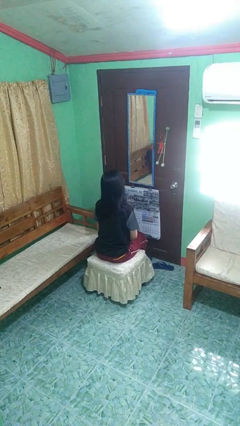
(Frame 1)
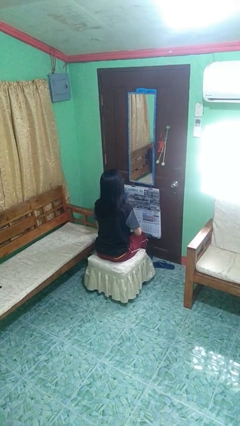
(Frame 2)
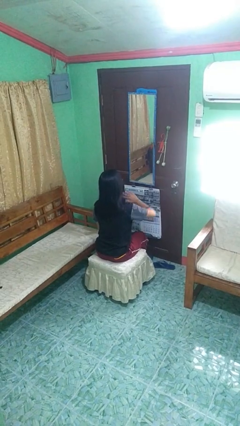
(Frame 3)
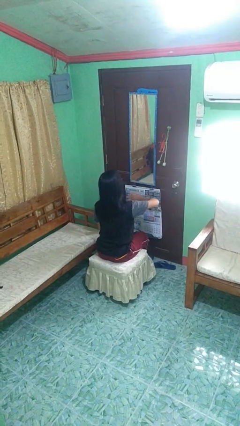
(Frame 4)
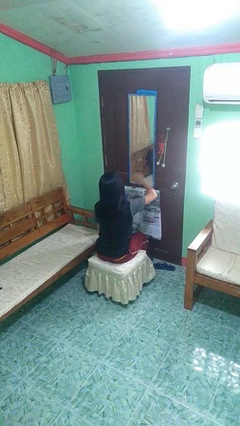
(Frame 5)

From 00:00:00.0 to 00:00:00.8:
person gestures swipe down

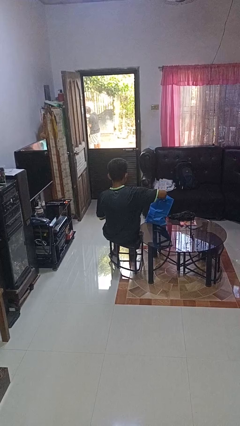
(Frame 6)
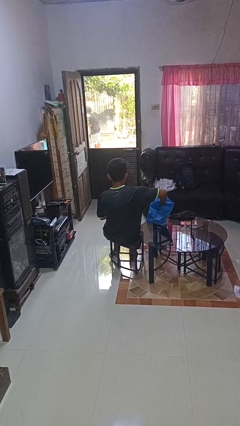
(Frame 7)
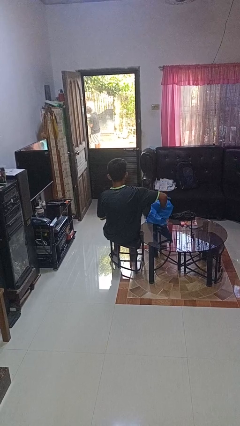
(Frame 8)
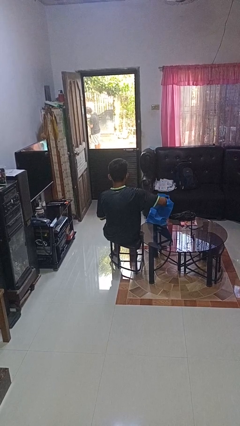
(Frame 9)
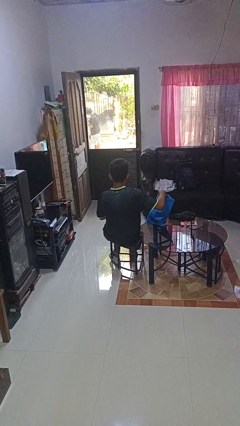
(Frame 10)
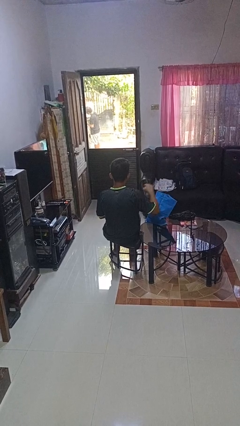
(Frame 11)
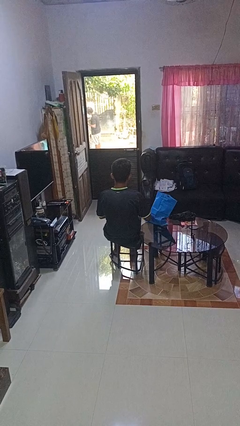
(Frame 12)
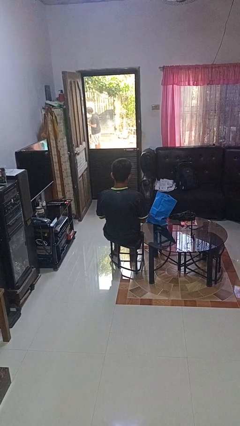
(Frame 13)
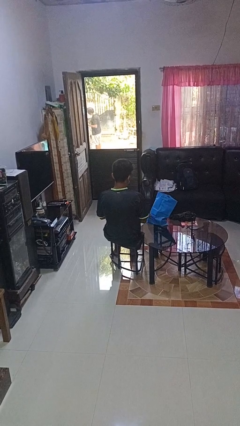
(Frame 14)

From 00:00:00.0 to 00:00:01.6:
person puts object into bag

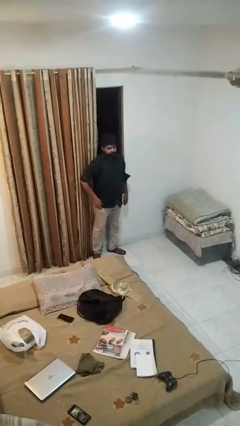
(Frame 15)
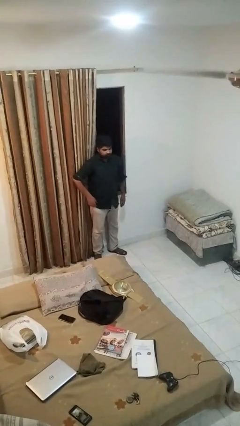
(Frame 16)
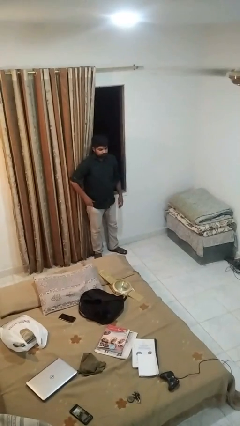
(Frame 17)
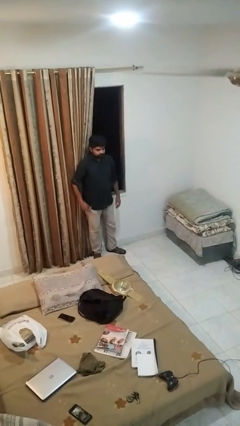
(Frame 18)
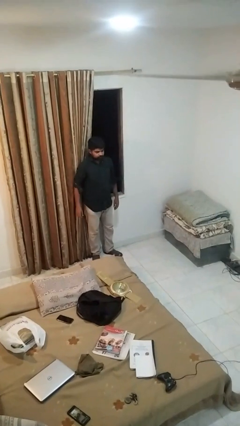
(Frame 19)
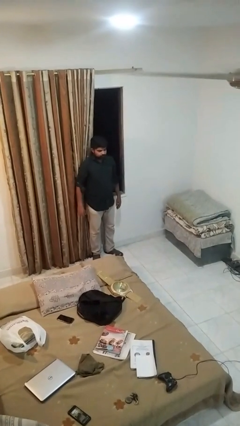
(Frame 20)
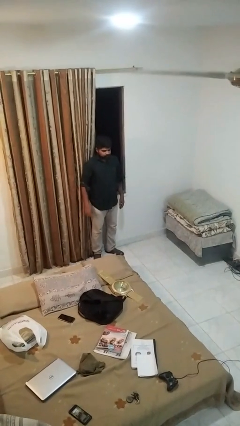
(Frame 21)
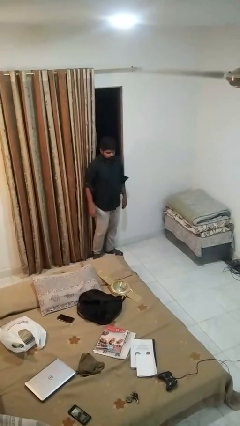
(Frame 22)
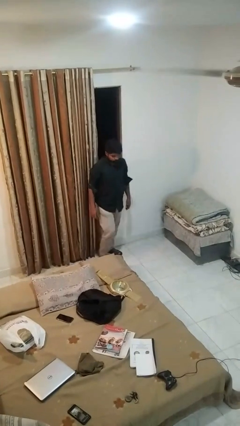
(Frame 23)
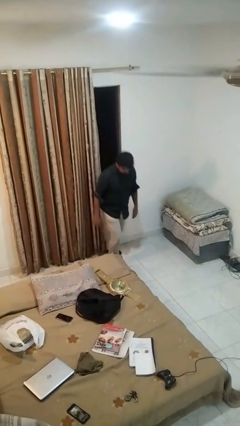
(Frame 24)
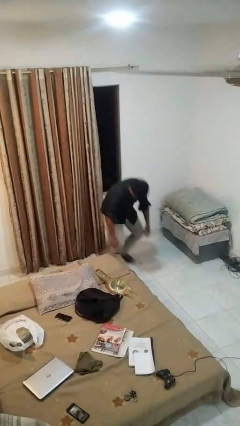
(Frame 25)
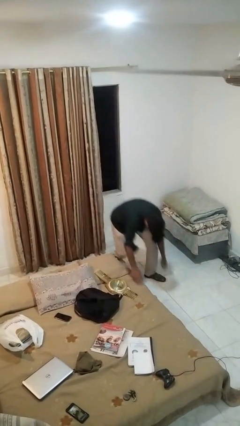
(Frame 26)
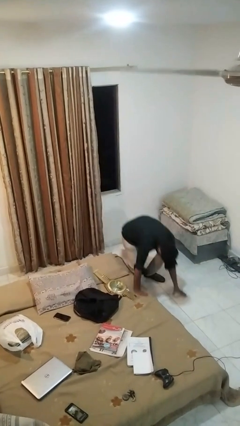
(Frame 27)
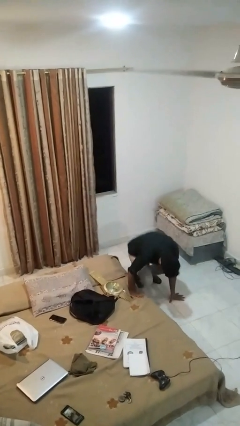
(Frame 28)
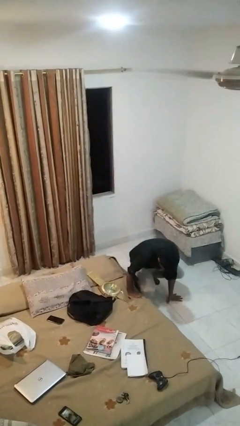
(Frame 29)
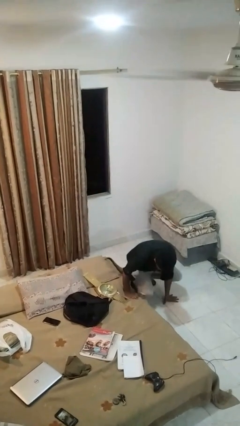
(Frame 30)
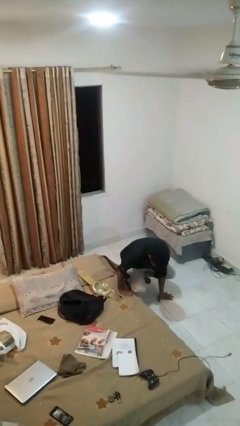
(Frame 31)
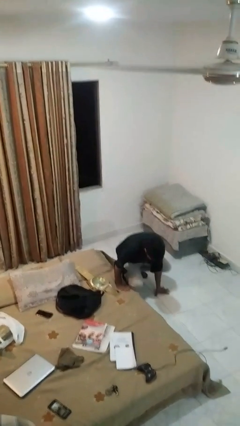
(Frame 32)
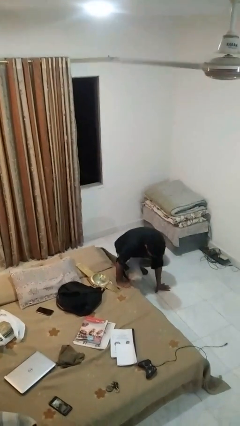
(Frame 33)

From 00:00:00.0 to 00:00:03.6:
person trips on object on floor

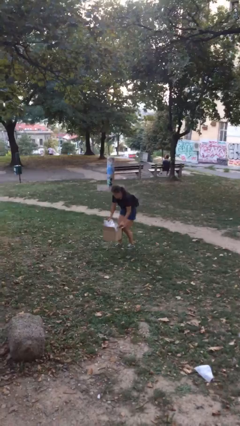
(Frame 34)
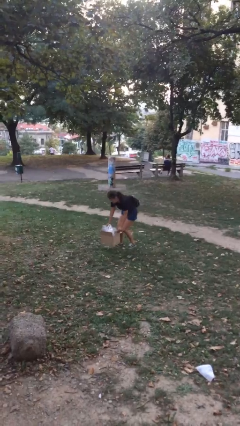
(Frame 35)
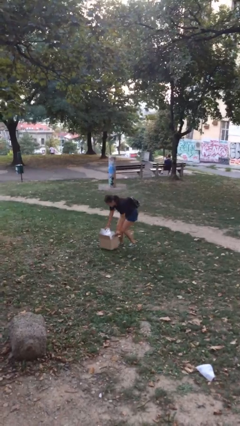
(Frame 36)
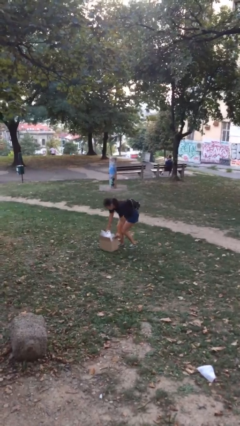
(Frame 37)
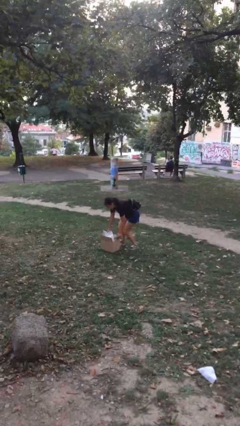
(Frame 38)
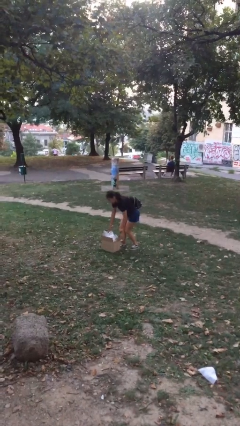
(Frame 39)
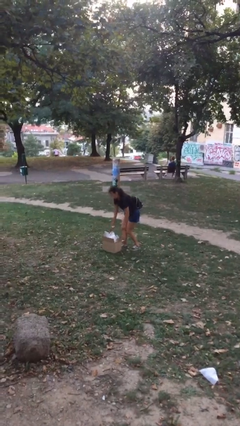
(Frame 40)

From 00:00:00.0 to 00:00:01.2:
person puts down object on floor

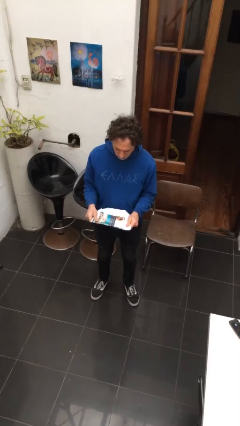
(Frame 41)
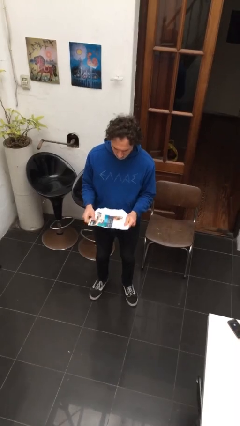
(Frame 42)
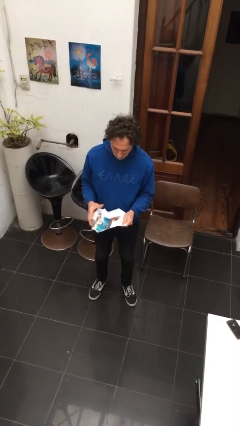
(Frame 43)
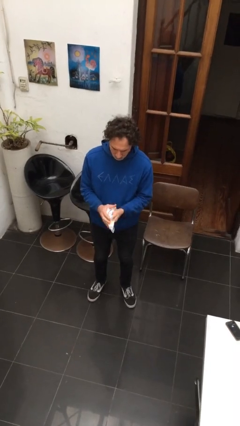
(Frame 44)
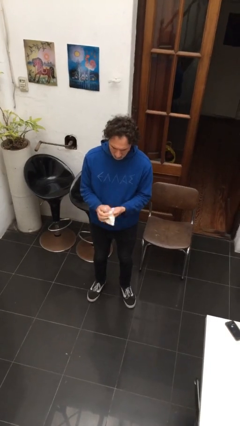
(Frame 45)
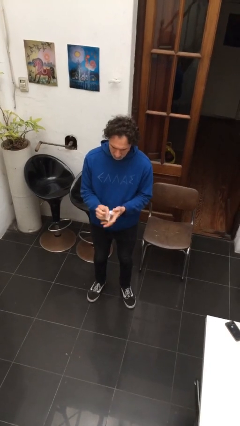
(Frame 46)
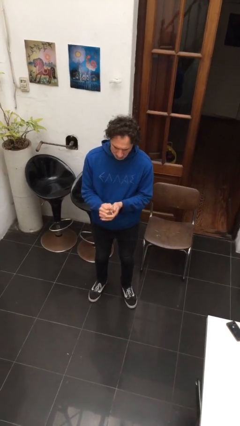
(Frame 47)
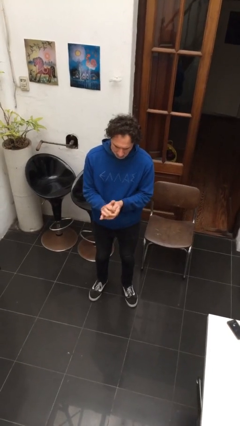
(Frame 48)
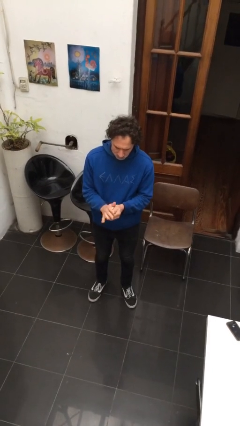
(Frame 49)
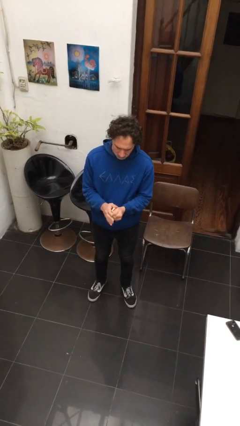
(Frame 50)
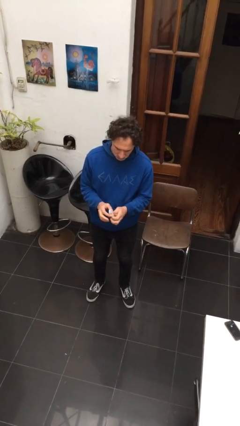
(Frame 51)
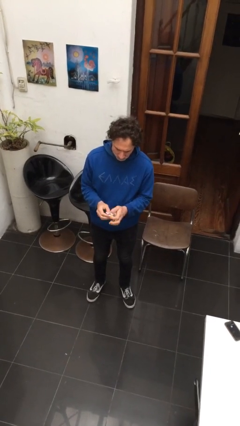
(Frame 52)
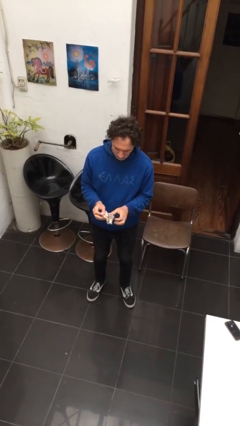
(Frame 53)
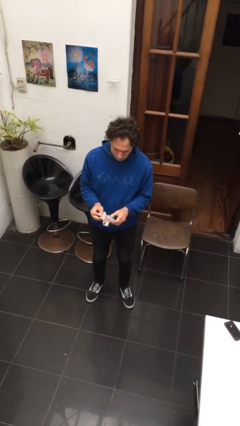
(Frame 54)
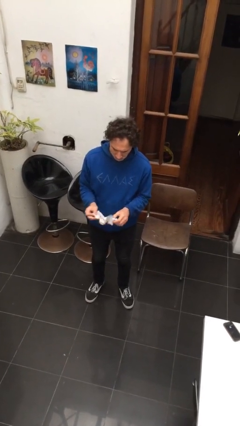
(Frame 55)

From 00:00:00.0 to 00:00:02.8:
person crumples paper

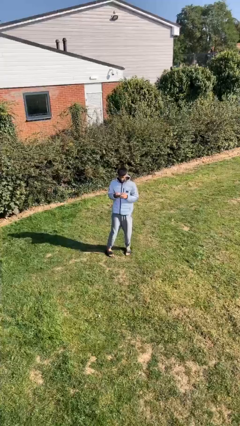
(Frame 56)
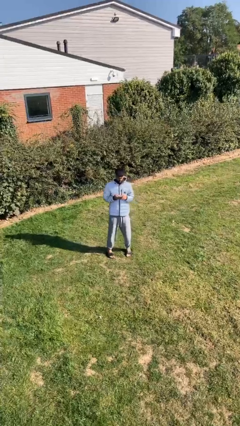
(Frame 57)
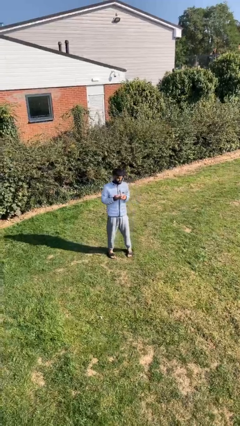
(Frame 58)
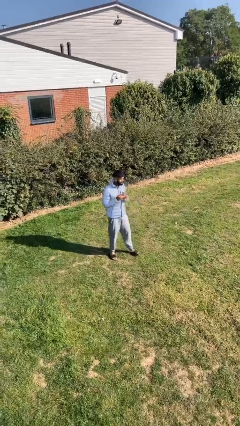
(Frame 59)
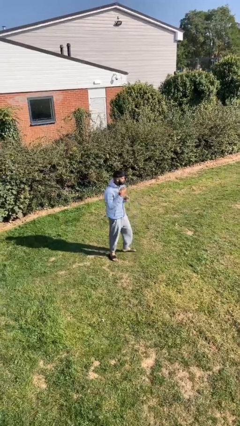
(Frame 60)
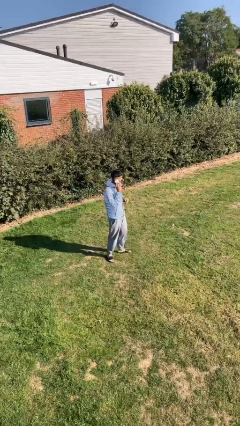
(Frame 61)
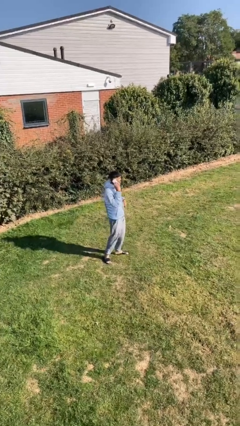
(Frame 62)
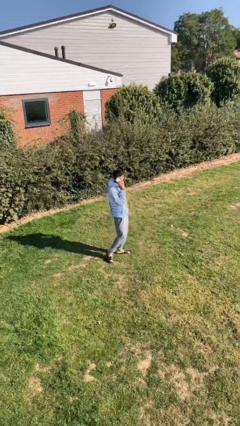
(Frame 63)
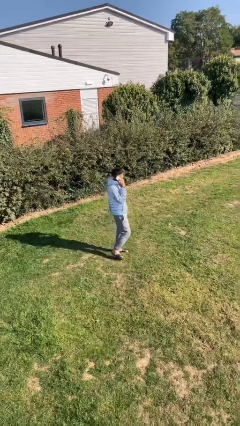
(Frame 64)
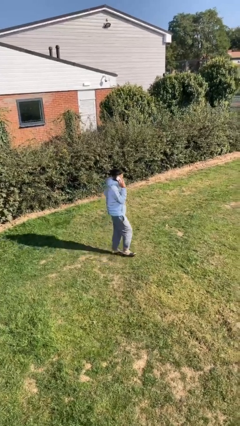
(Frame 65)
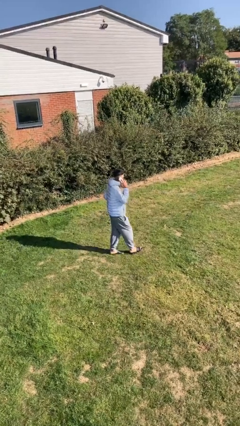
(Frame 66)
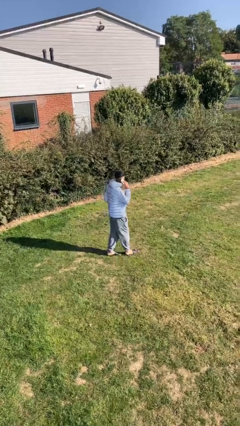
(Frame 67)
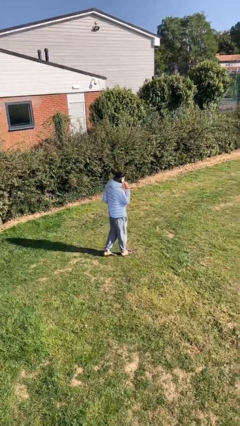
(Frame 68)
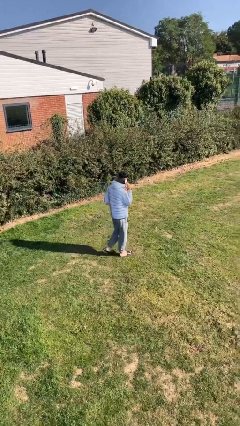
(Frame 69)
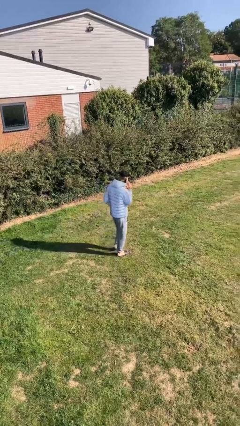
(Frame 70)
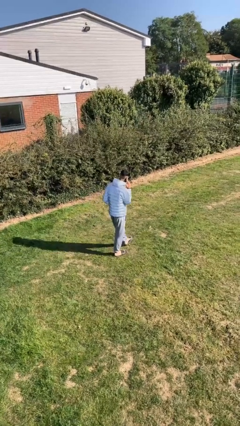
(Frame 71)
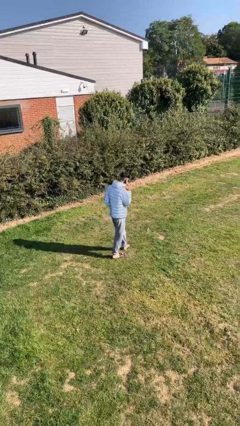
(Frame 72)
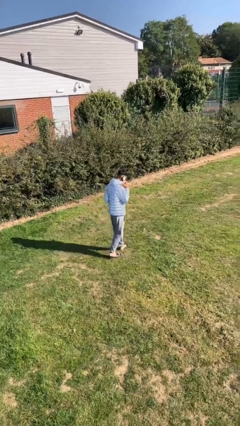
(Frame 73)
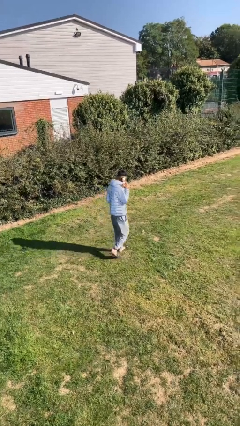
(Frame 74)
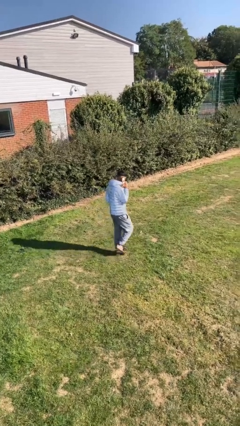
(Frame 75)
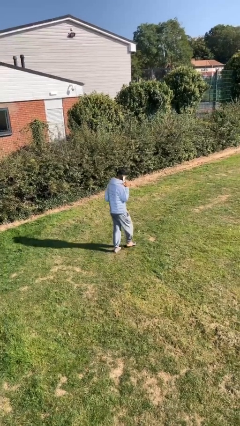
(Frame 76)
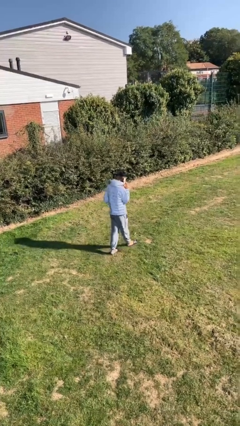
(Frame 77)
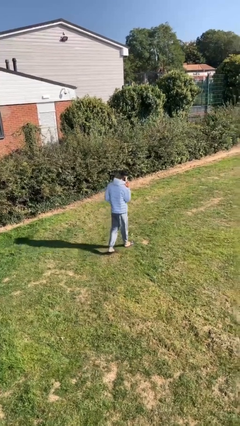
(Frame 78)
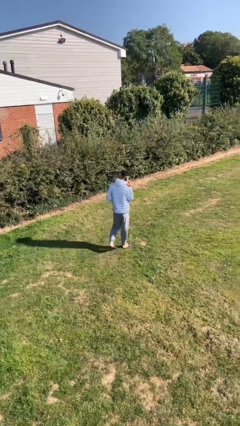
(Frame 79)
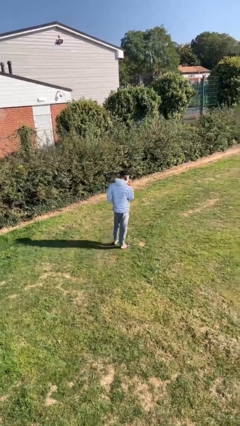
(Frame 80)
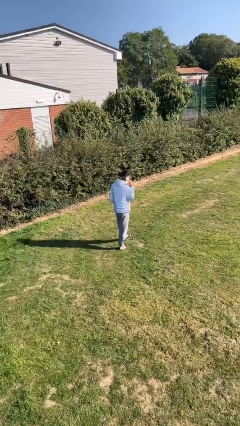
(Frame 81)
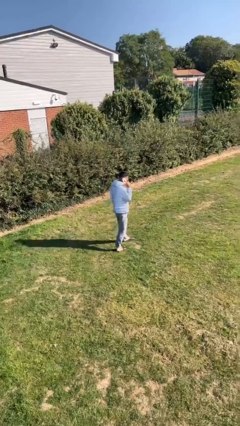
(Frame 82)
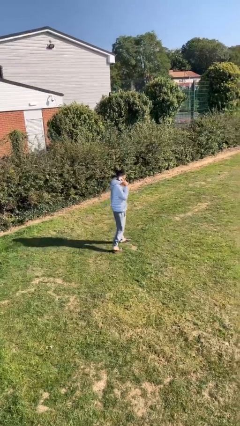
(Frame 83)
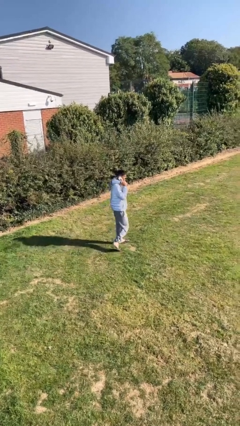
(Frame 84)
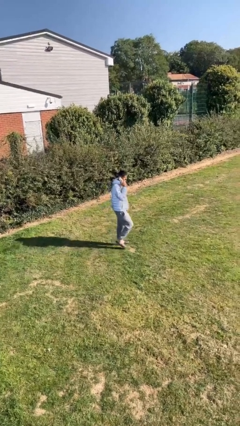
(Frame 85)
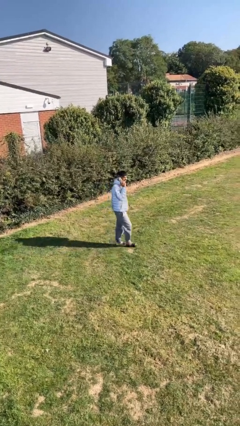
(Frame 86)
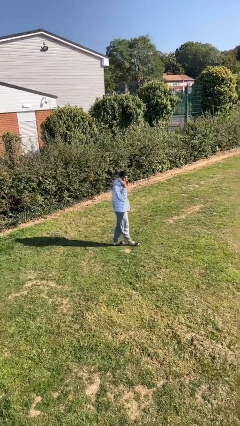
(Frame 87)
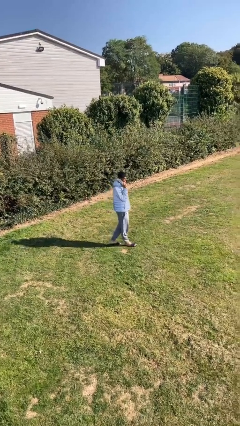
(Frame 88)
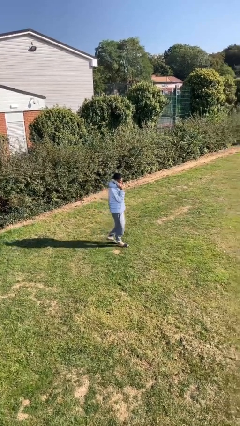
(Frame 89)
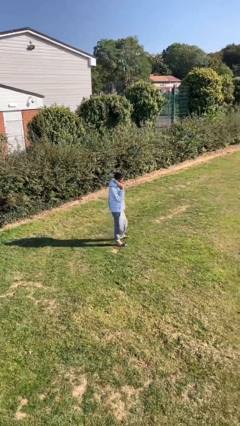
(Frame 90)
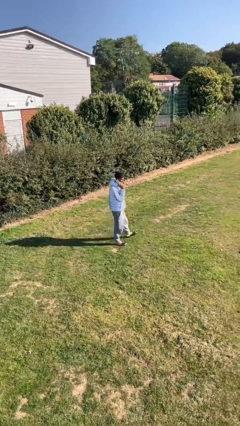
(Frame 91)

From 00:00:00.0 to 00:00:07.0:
person talks on phone

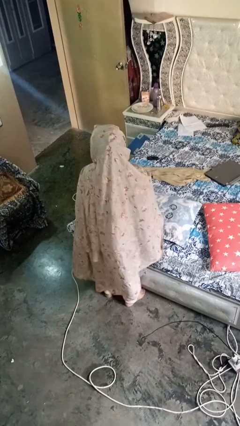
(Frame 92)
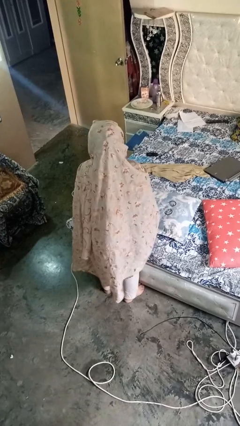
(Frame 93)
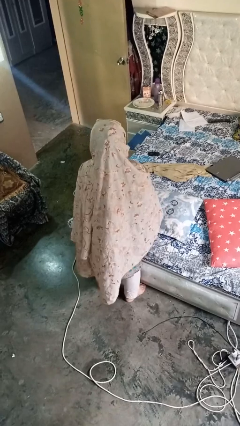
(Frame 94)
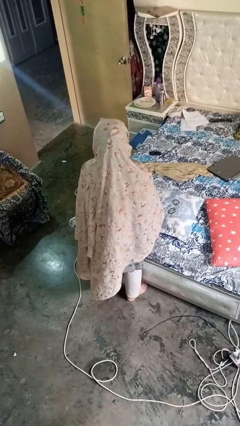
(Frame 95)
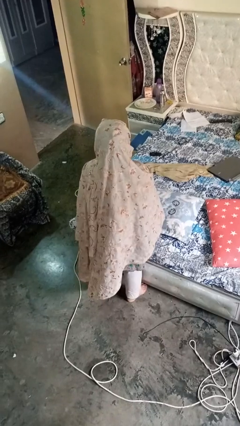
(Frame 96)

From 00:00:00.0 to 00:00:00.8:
person taps object with finger
